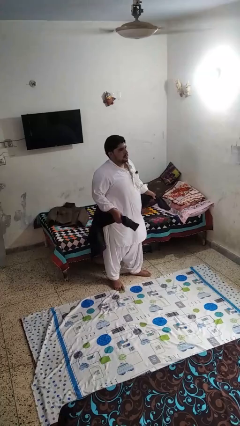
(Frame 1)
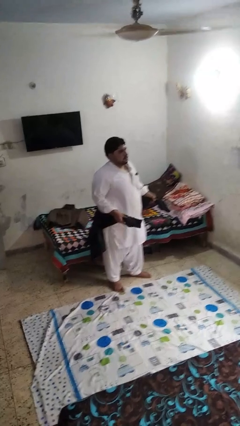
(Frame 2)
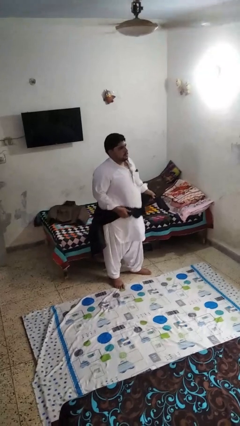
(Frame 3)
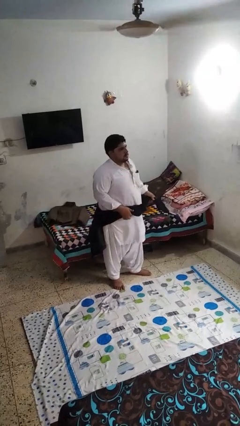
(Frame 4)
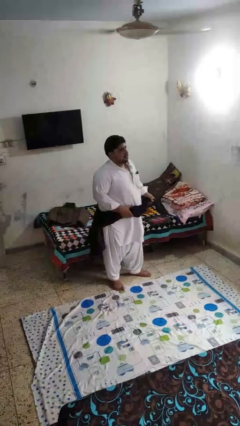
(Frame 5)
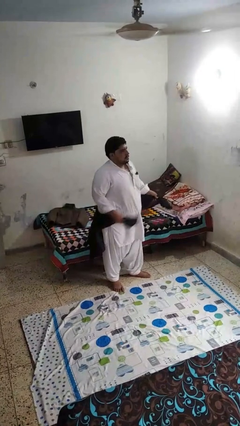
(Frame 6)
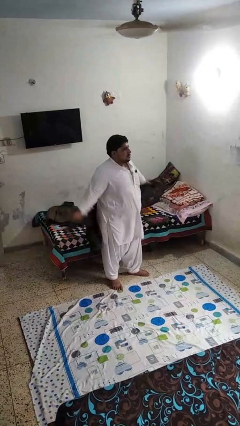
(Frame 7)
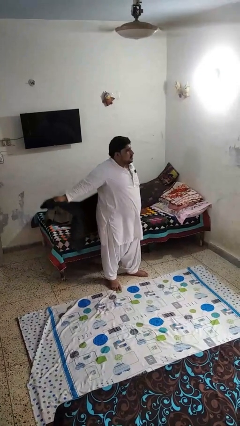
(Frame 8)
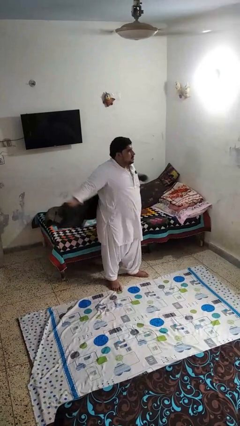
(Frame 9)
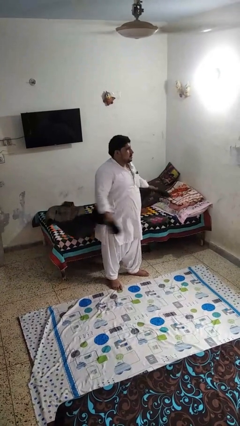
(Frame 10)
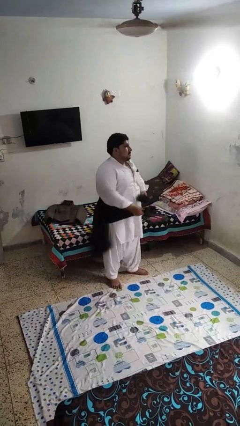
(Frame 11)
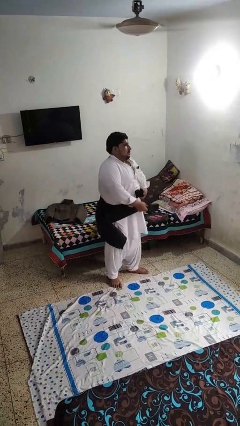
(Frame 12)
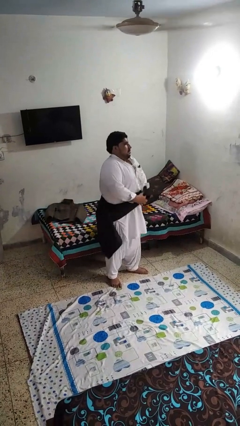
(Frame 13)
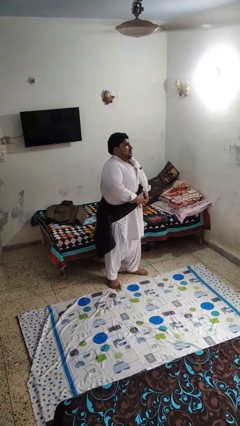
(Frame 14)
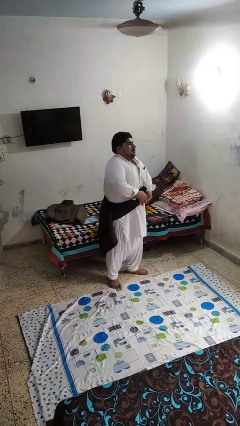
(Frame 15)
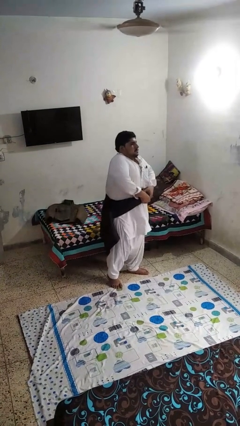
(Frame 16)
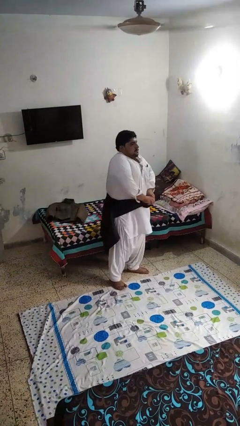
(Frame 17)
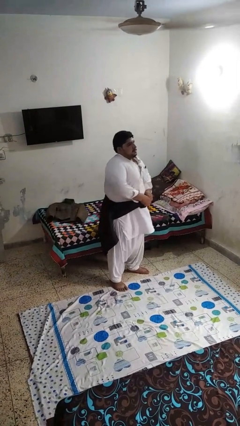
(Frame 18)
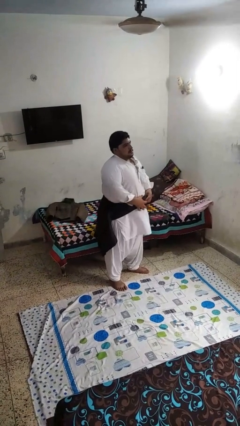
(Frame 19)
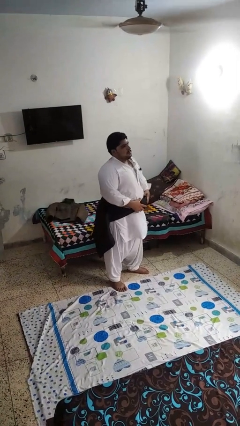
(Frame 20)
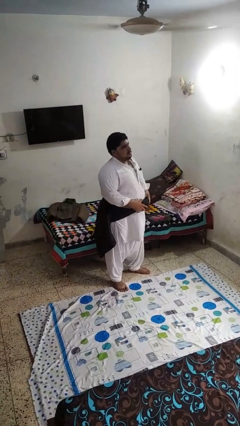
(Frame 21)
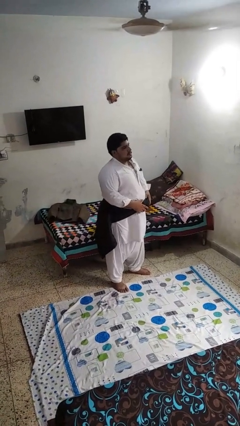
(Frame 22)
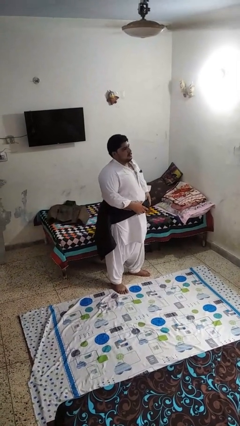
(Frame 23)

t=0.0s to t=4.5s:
person ties jacket around waist

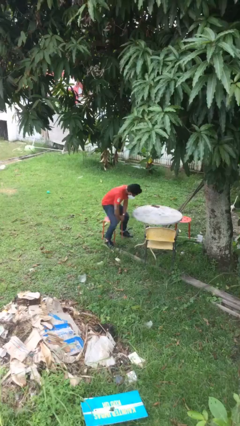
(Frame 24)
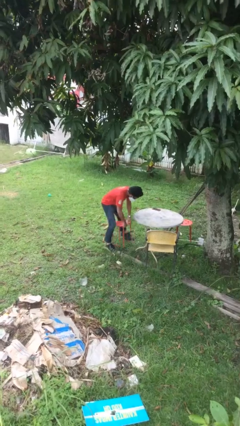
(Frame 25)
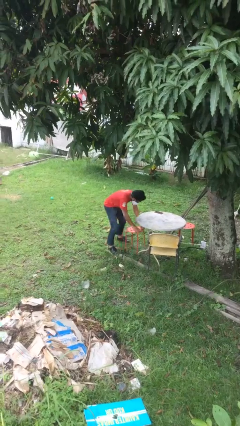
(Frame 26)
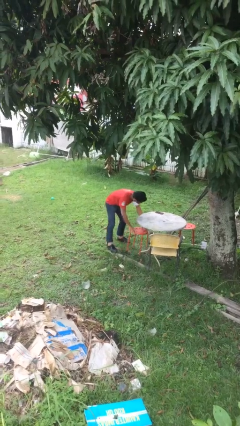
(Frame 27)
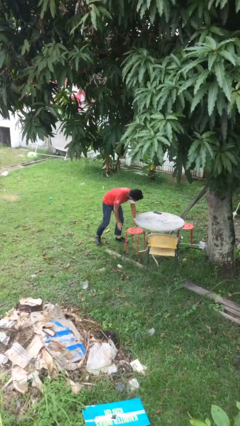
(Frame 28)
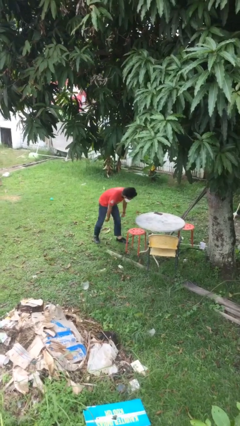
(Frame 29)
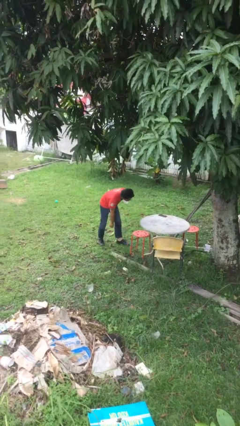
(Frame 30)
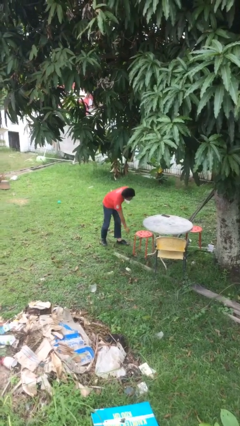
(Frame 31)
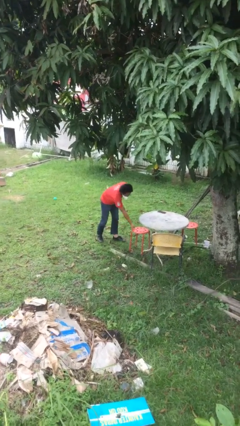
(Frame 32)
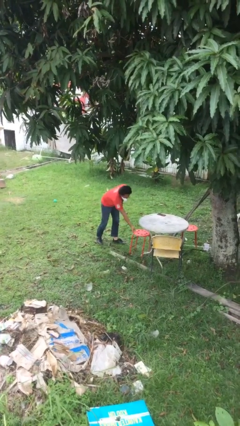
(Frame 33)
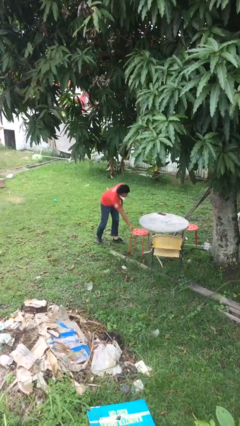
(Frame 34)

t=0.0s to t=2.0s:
person stands up

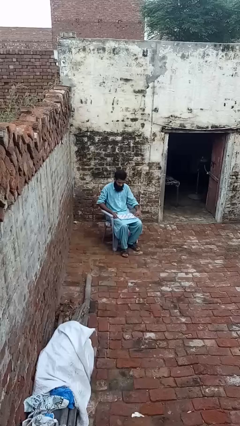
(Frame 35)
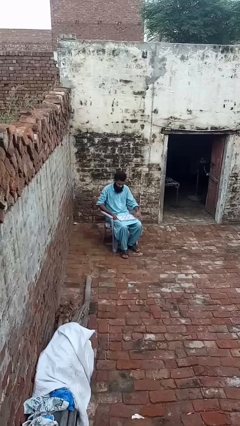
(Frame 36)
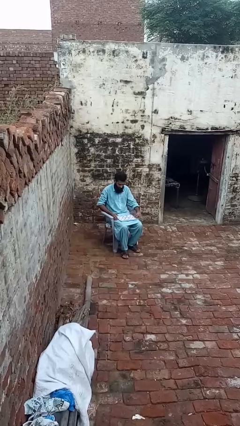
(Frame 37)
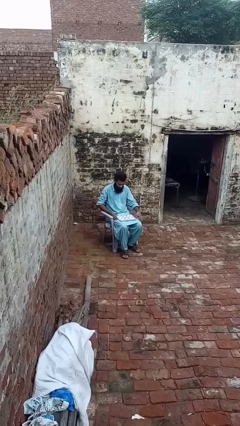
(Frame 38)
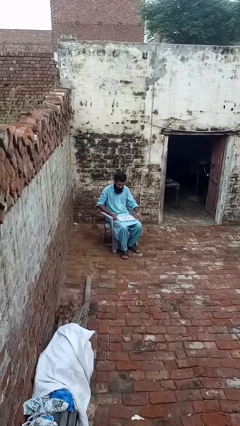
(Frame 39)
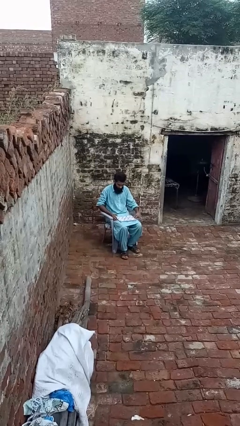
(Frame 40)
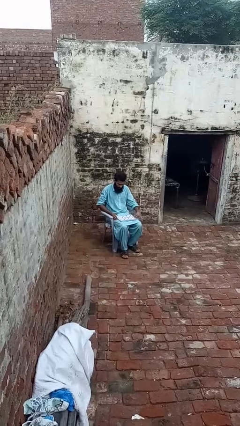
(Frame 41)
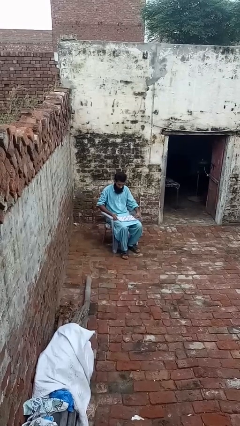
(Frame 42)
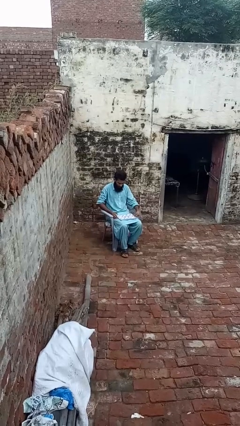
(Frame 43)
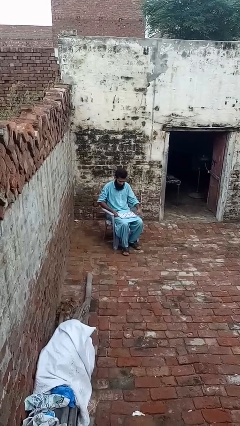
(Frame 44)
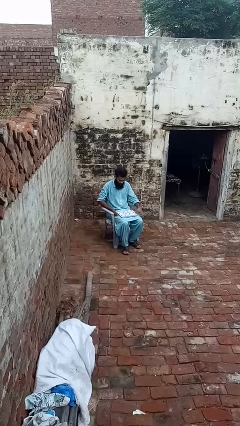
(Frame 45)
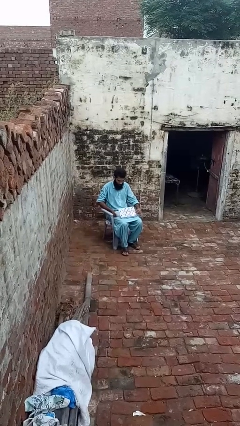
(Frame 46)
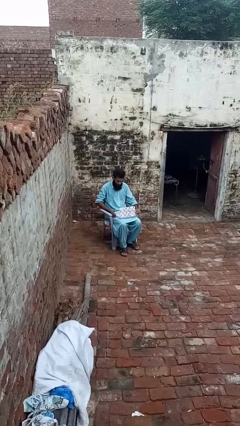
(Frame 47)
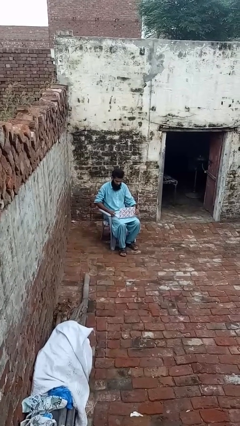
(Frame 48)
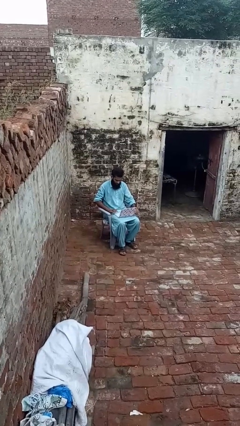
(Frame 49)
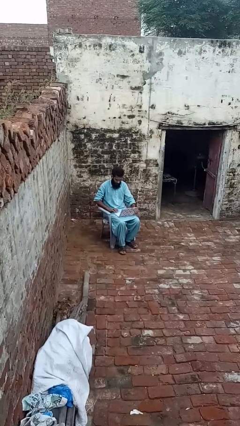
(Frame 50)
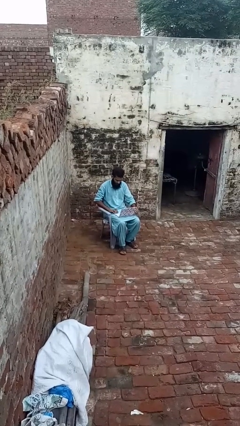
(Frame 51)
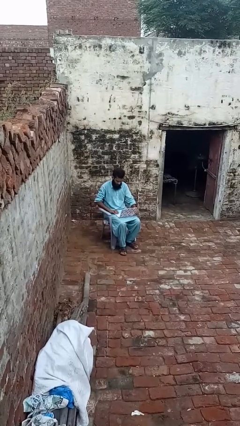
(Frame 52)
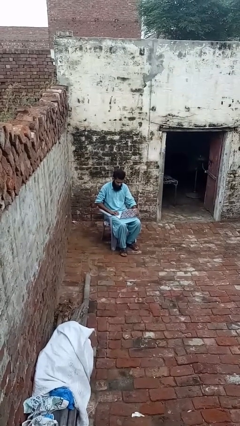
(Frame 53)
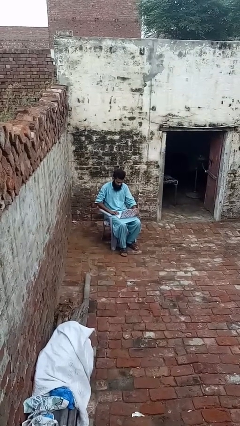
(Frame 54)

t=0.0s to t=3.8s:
person opens laptop

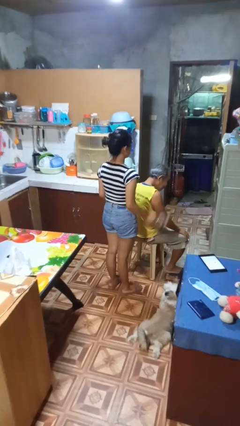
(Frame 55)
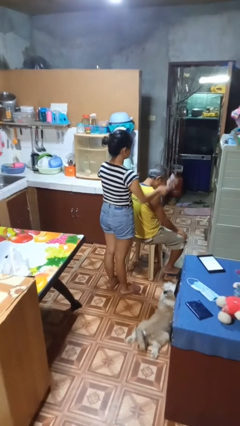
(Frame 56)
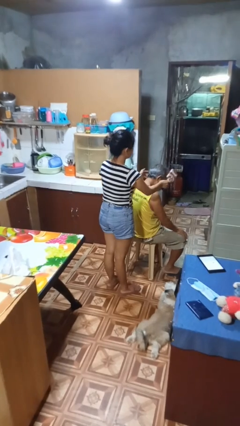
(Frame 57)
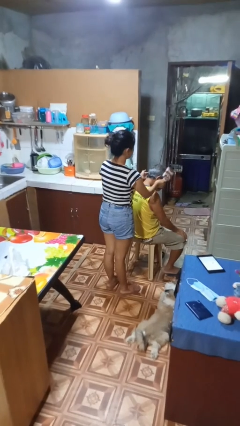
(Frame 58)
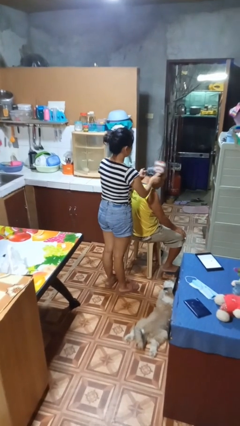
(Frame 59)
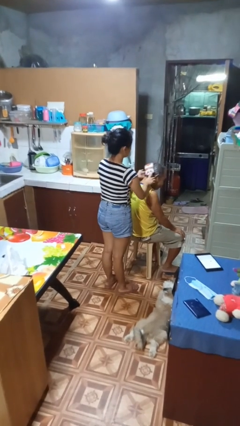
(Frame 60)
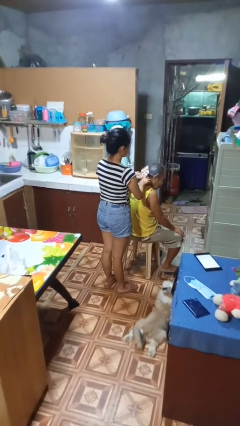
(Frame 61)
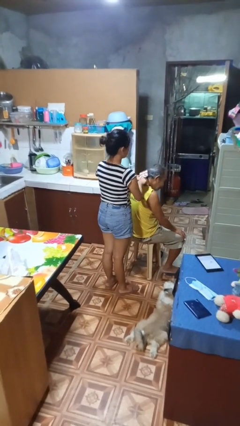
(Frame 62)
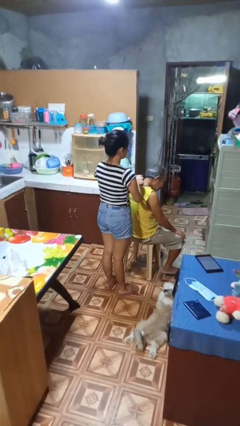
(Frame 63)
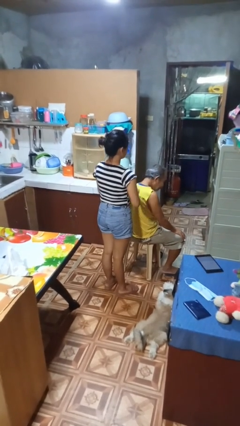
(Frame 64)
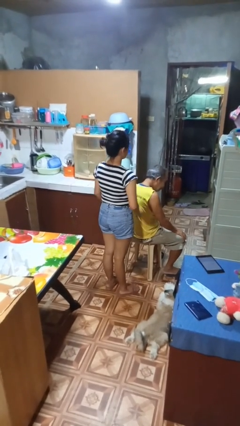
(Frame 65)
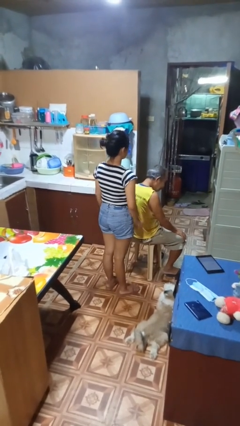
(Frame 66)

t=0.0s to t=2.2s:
person brushes hair of person

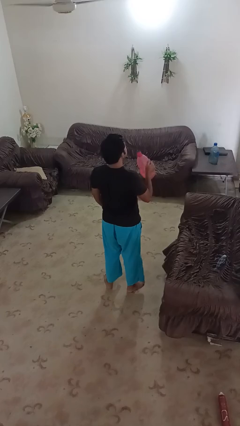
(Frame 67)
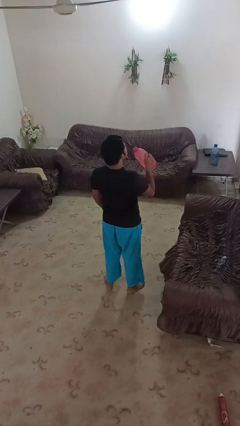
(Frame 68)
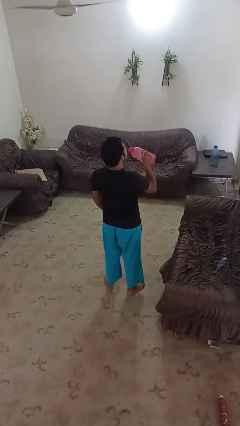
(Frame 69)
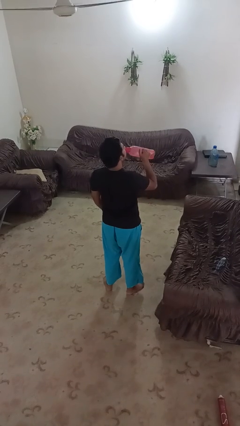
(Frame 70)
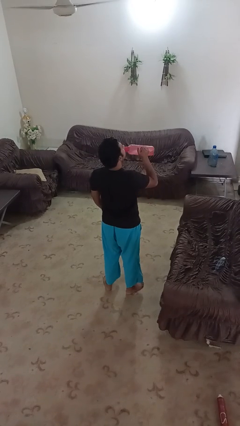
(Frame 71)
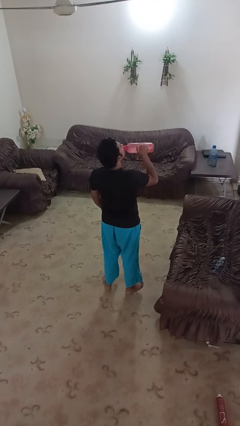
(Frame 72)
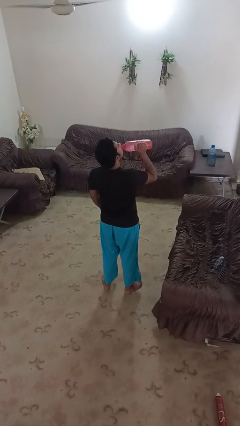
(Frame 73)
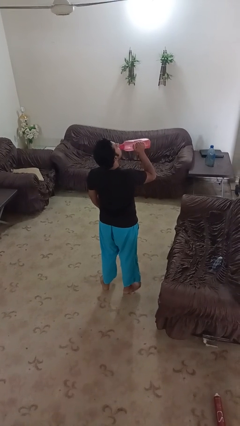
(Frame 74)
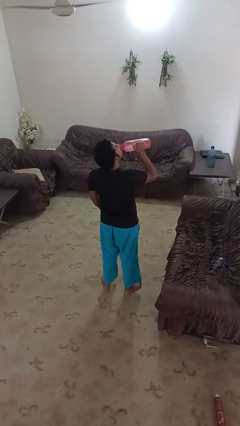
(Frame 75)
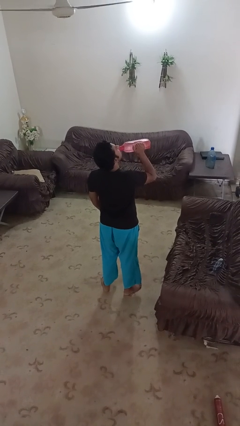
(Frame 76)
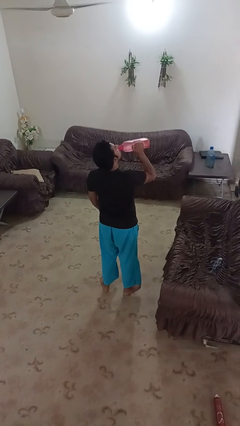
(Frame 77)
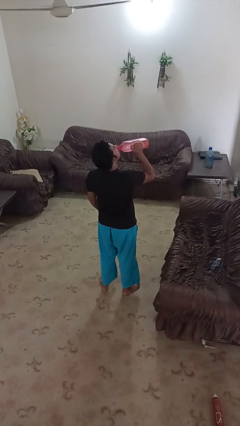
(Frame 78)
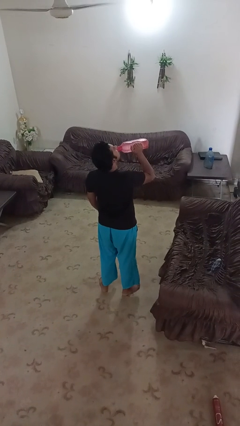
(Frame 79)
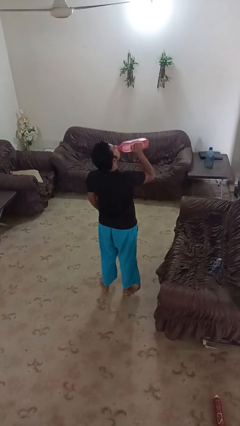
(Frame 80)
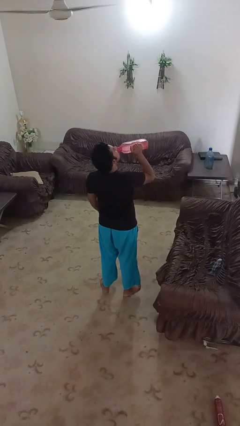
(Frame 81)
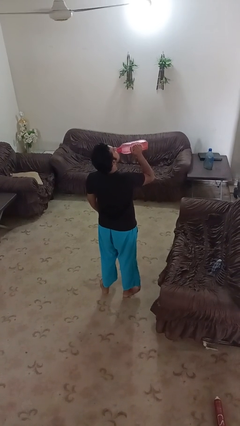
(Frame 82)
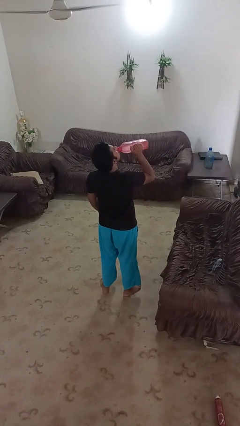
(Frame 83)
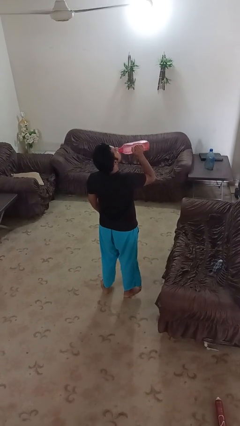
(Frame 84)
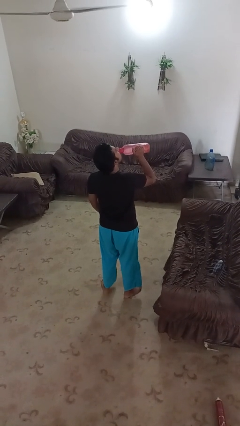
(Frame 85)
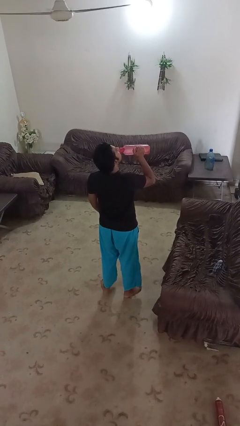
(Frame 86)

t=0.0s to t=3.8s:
person drinks from bottle

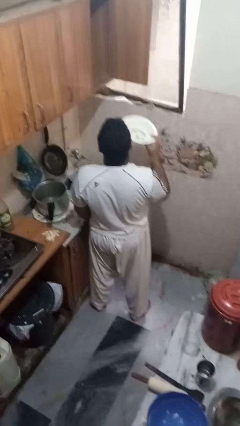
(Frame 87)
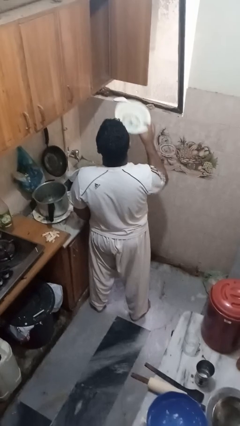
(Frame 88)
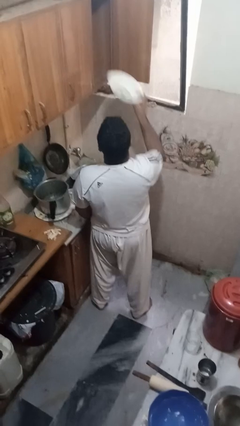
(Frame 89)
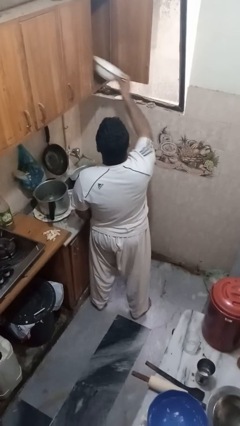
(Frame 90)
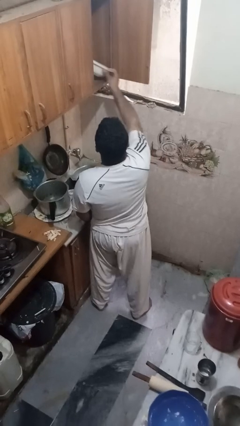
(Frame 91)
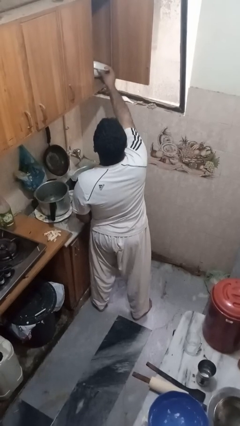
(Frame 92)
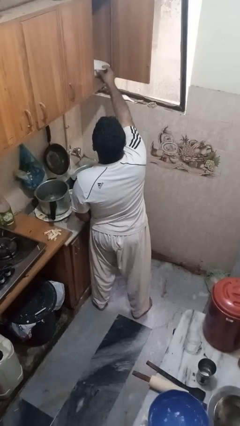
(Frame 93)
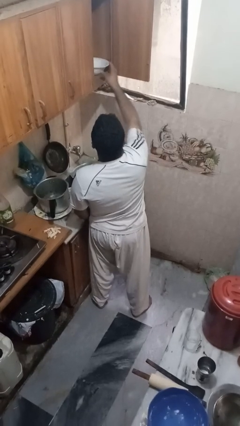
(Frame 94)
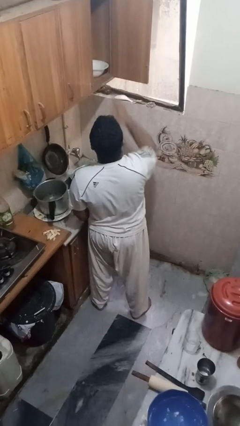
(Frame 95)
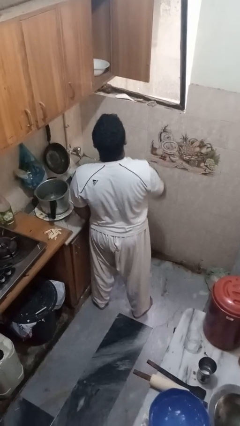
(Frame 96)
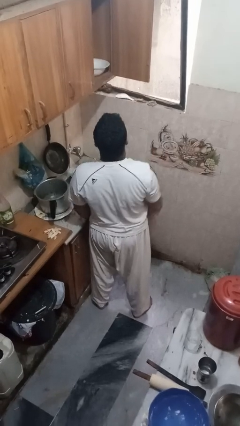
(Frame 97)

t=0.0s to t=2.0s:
person puts object in cabinet
